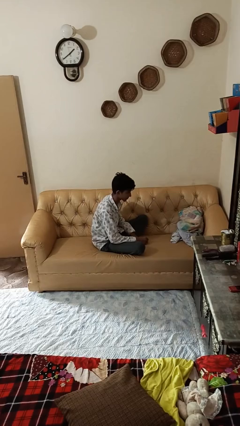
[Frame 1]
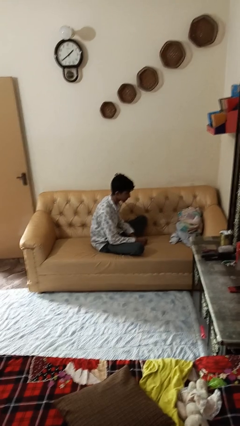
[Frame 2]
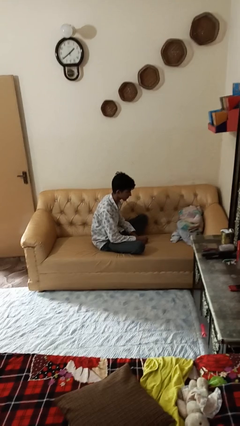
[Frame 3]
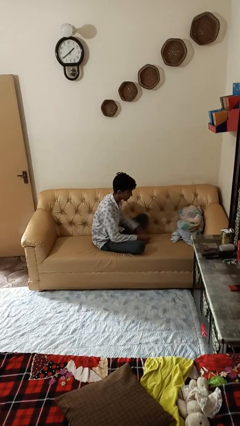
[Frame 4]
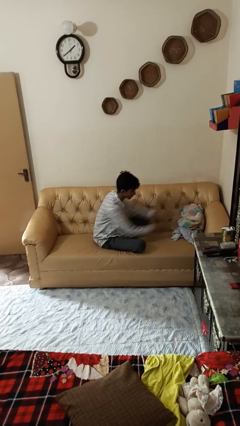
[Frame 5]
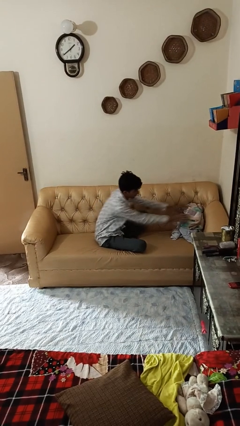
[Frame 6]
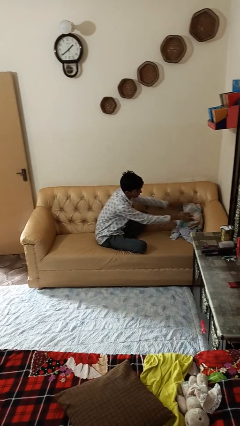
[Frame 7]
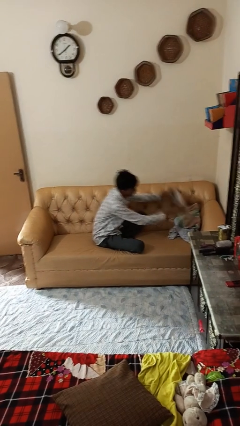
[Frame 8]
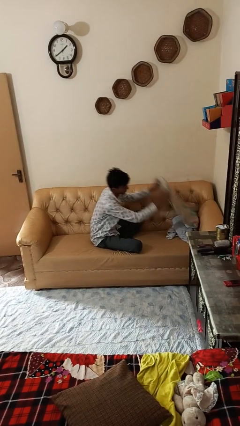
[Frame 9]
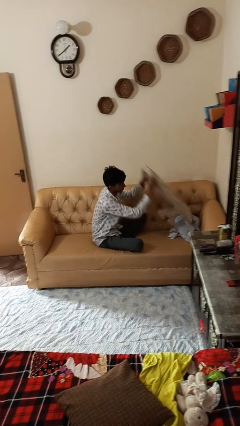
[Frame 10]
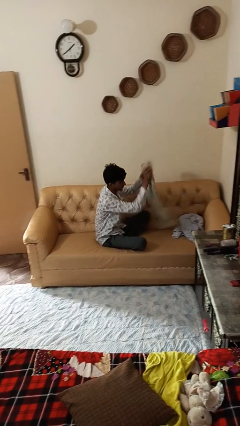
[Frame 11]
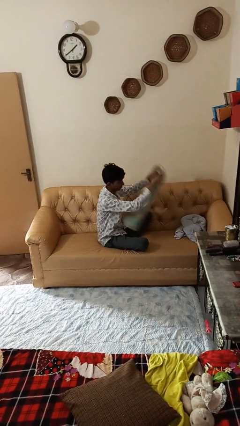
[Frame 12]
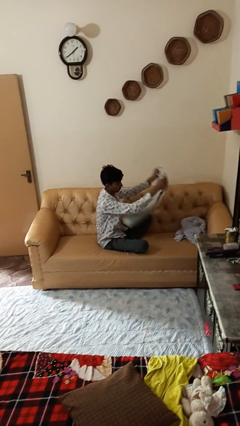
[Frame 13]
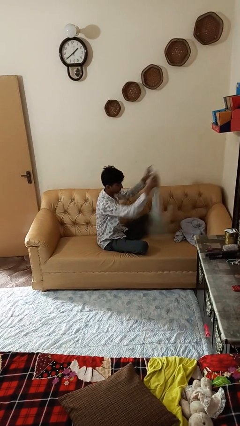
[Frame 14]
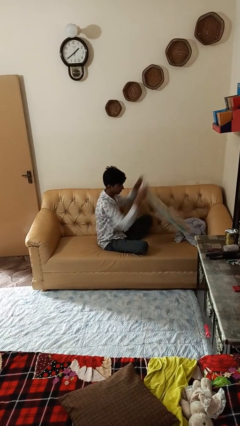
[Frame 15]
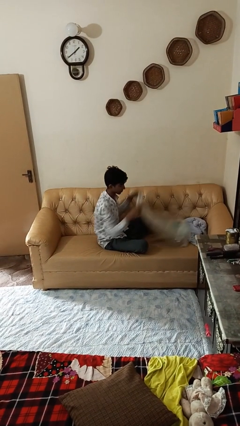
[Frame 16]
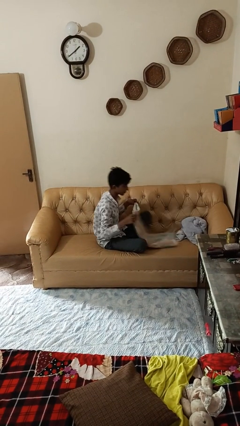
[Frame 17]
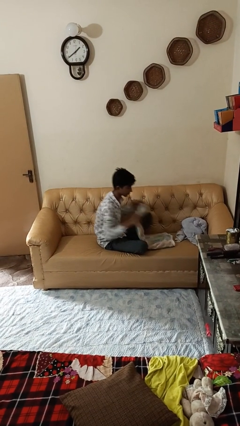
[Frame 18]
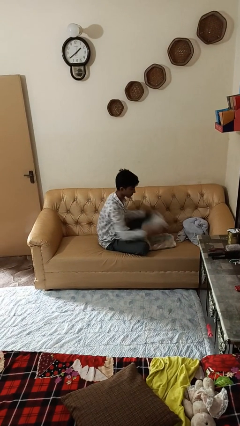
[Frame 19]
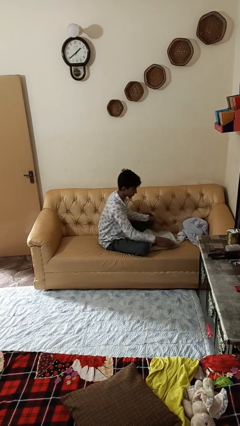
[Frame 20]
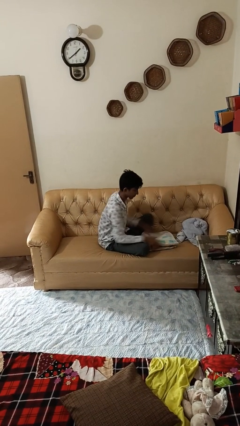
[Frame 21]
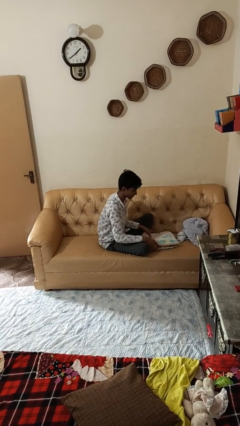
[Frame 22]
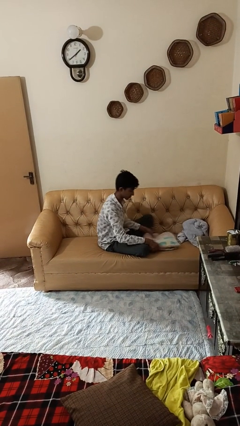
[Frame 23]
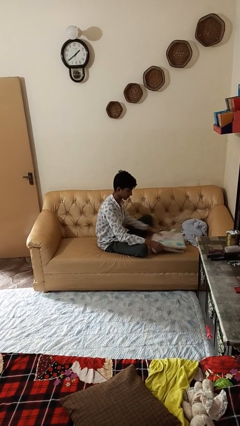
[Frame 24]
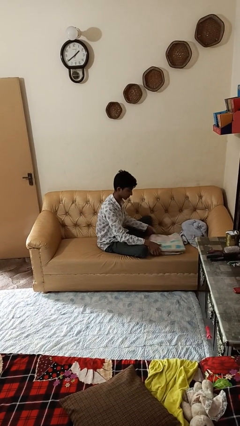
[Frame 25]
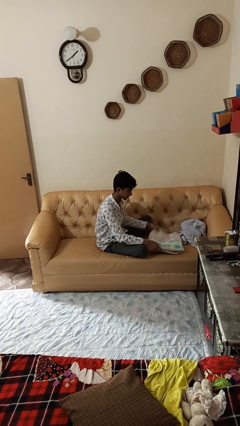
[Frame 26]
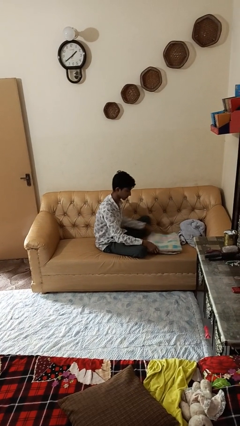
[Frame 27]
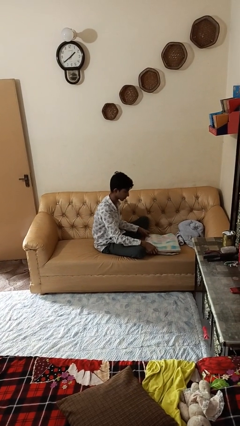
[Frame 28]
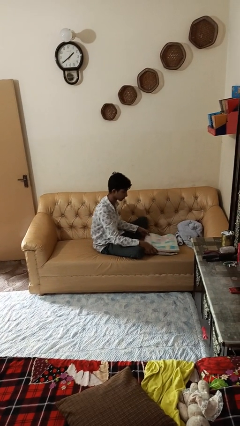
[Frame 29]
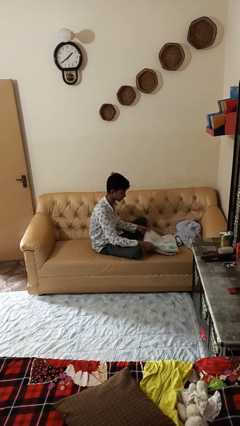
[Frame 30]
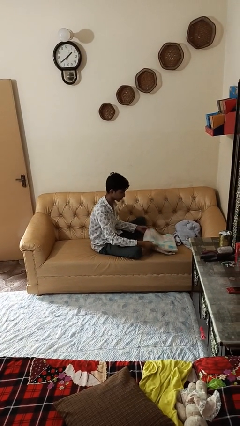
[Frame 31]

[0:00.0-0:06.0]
person folds towel

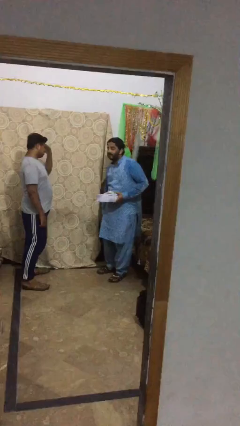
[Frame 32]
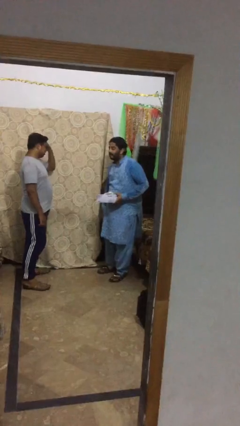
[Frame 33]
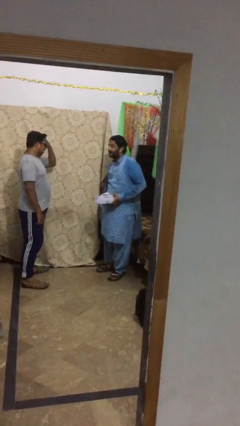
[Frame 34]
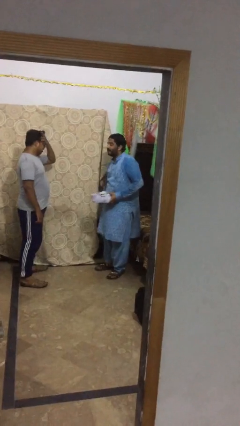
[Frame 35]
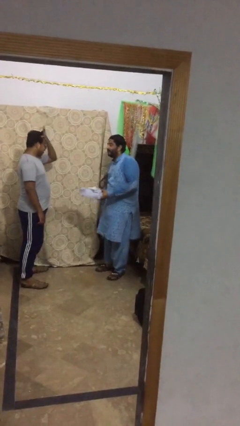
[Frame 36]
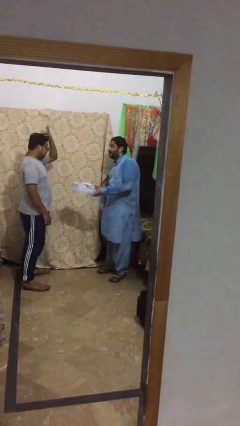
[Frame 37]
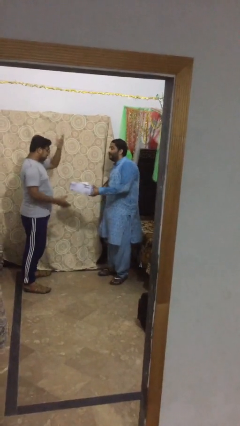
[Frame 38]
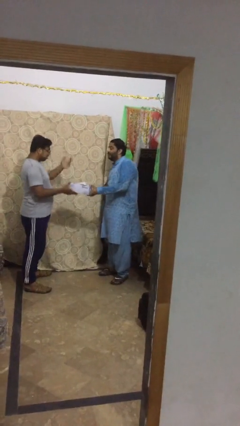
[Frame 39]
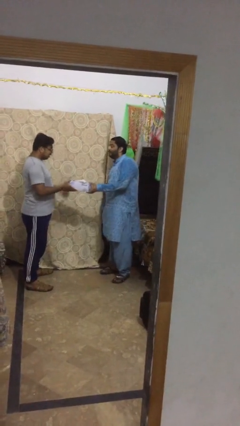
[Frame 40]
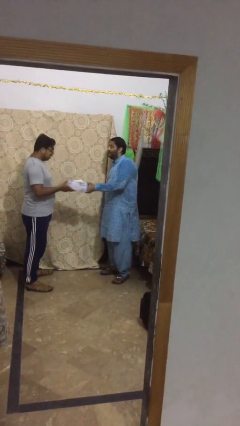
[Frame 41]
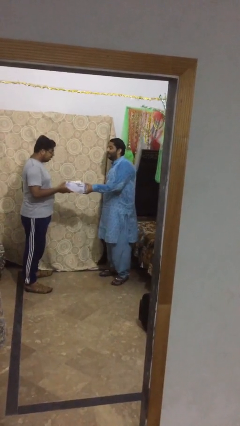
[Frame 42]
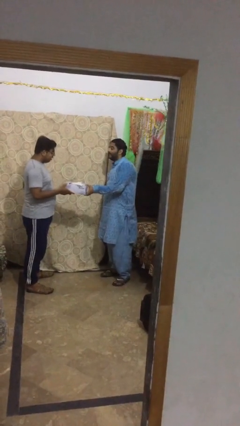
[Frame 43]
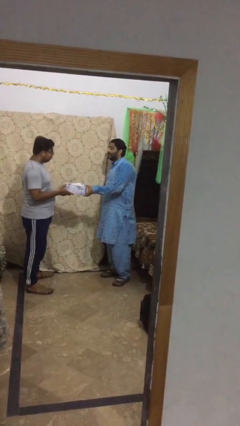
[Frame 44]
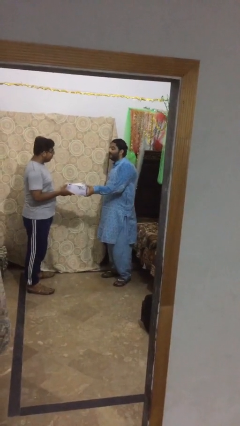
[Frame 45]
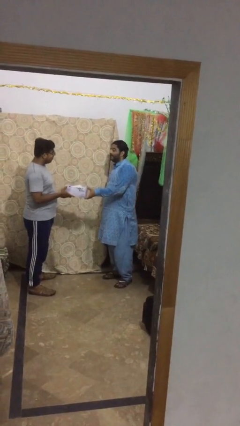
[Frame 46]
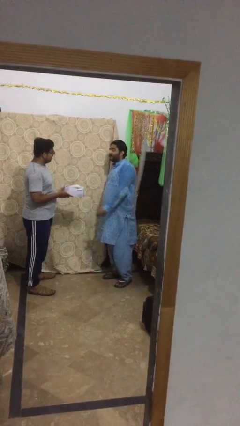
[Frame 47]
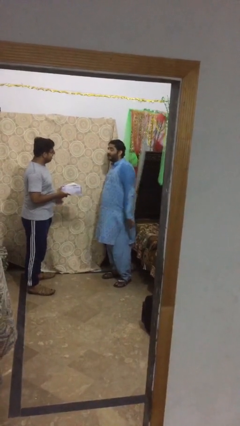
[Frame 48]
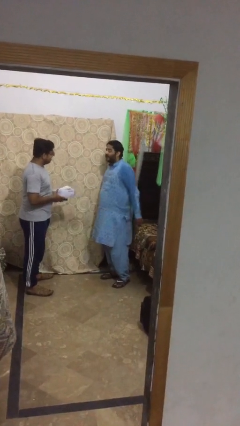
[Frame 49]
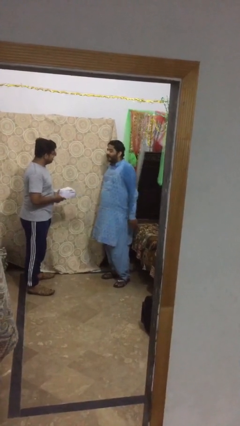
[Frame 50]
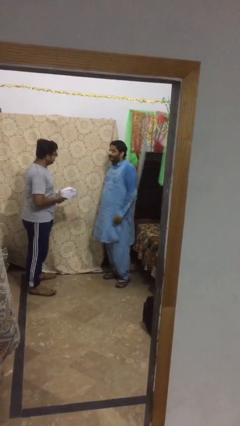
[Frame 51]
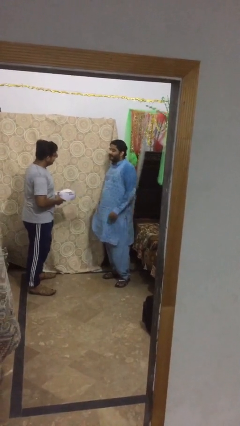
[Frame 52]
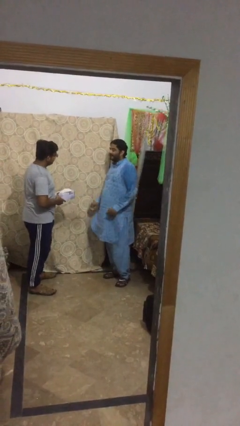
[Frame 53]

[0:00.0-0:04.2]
person transfers object to person

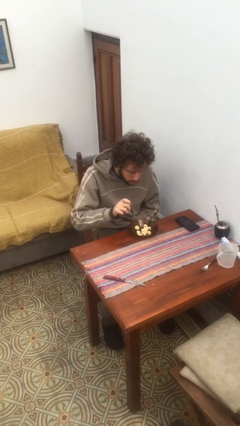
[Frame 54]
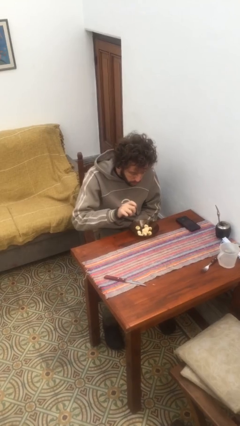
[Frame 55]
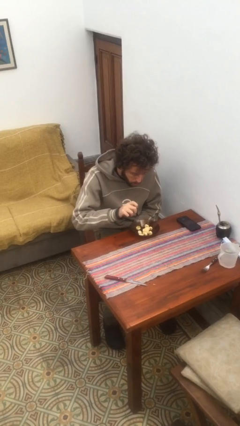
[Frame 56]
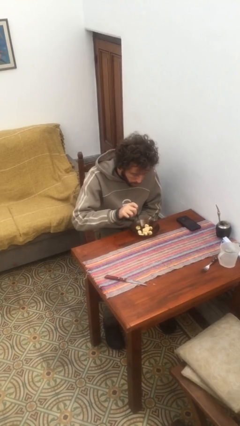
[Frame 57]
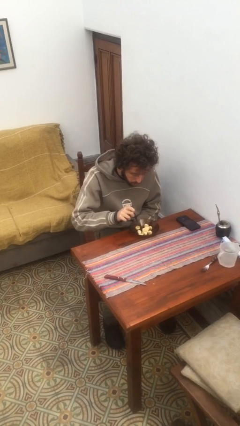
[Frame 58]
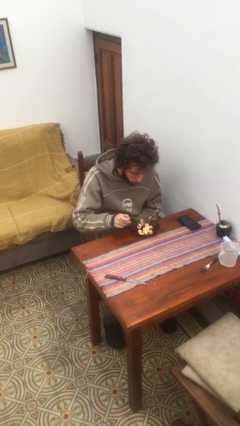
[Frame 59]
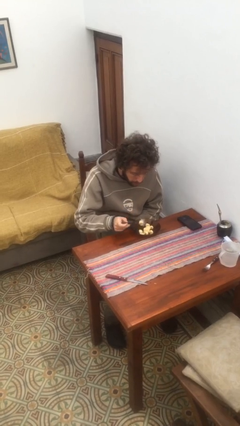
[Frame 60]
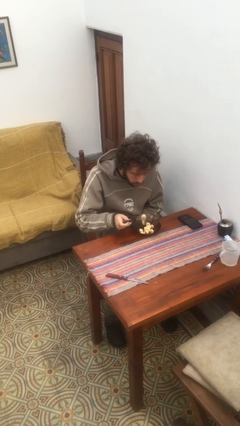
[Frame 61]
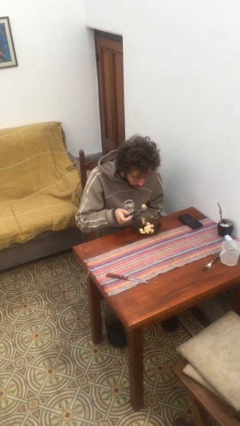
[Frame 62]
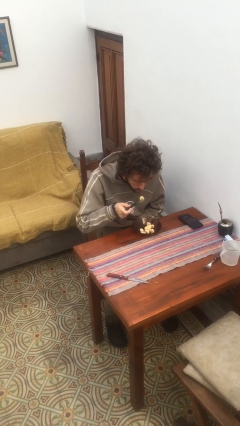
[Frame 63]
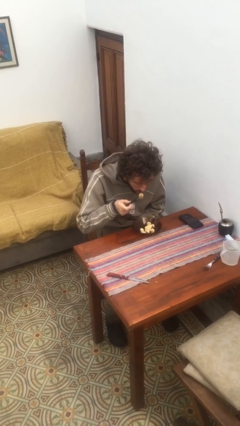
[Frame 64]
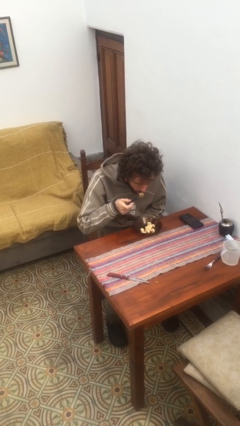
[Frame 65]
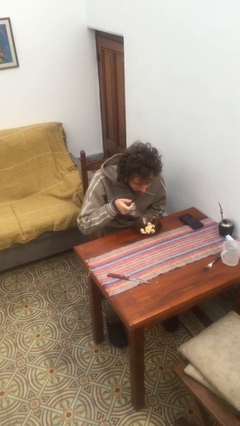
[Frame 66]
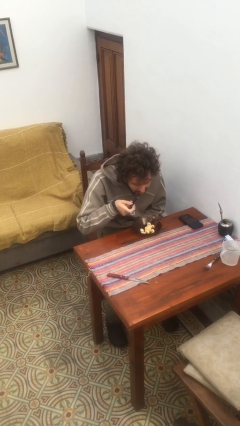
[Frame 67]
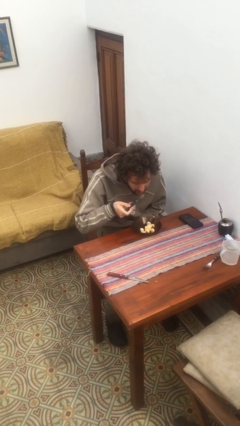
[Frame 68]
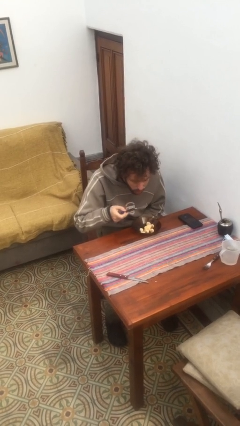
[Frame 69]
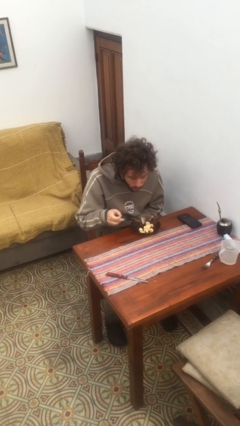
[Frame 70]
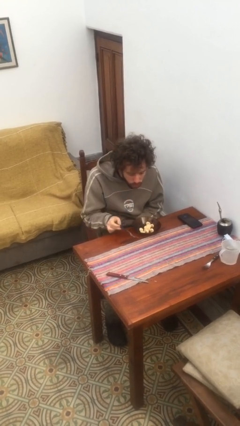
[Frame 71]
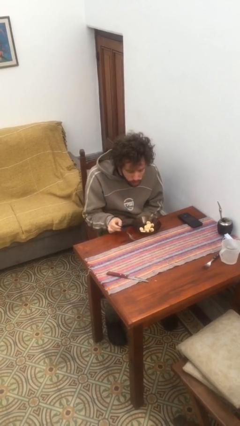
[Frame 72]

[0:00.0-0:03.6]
person eats with utensil

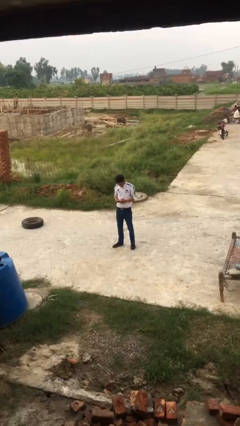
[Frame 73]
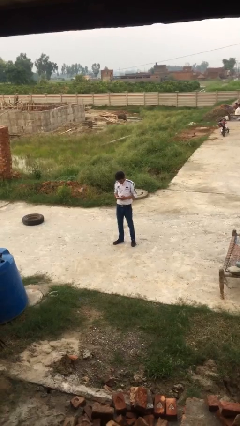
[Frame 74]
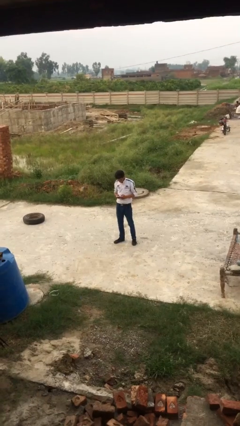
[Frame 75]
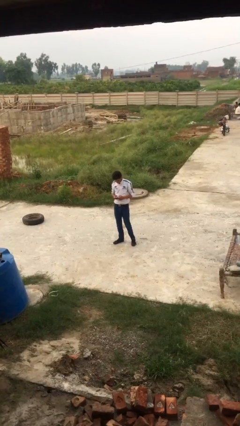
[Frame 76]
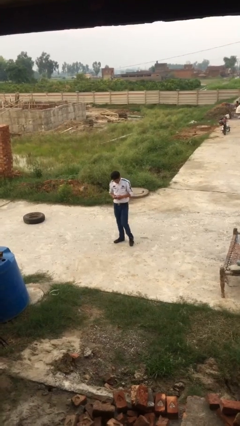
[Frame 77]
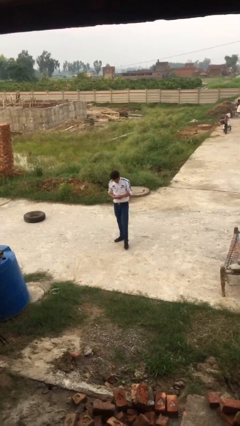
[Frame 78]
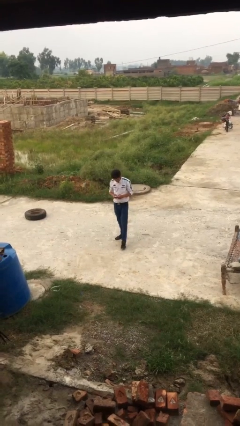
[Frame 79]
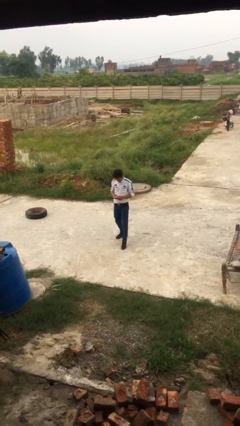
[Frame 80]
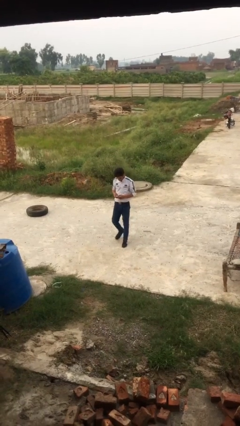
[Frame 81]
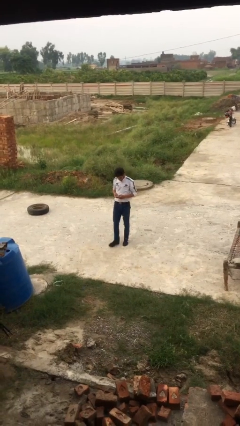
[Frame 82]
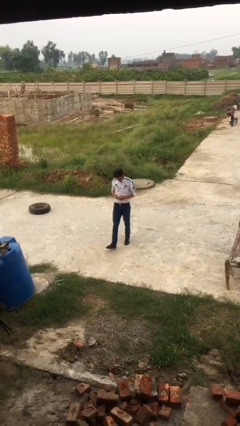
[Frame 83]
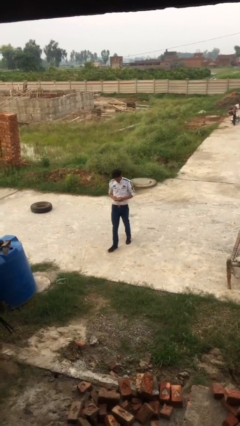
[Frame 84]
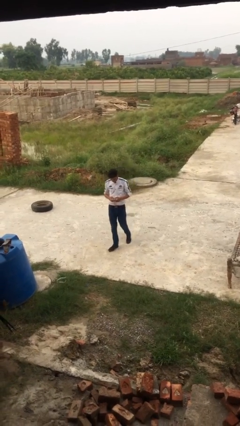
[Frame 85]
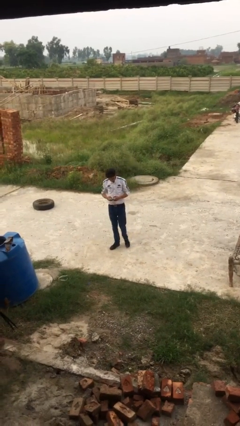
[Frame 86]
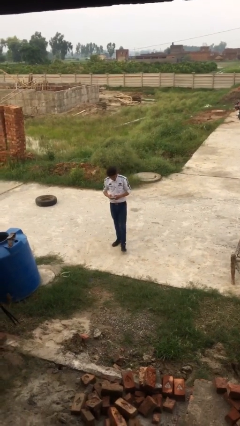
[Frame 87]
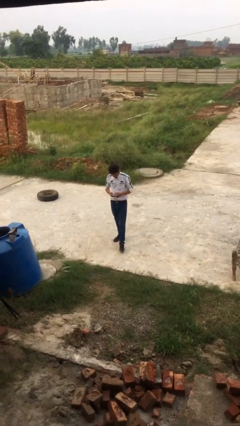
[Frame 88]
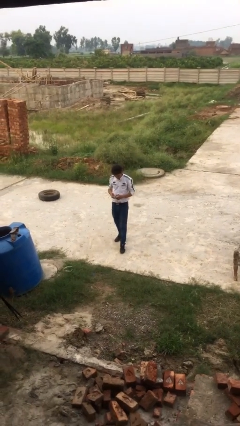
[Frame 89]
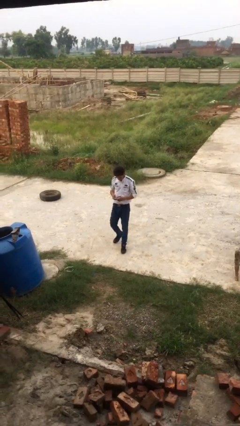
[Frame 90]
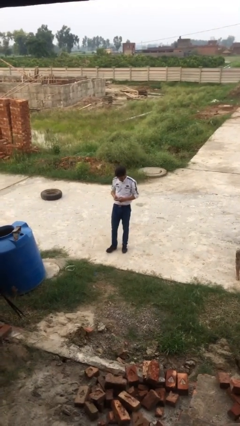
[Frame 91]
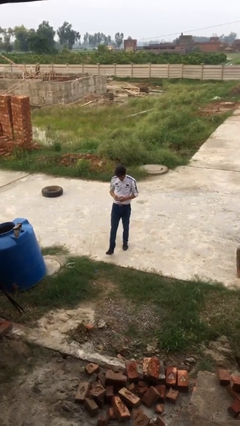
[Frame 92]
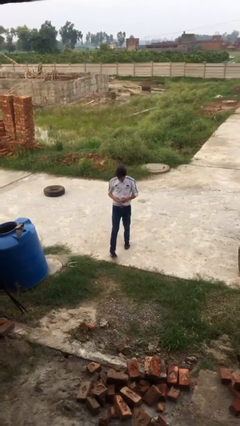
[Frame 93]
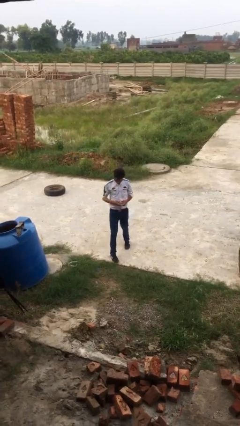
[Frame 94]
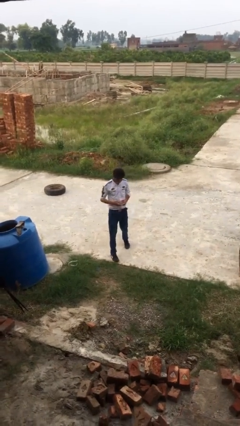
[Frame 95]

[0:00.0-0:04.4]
person texts on phone
